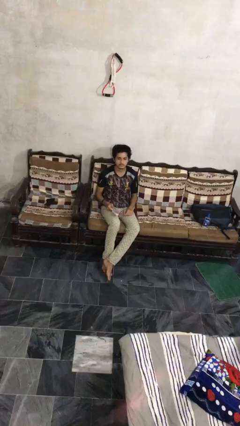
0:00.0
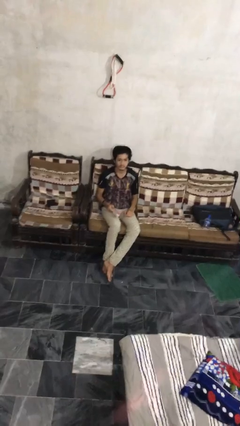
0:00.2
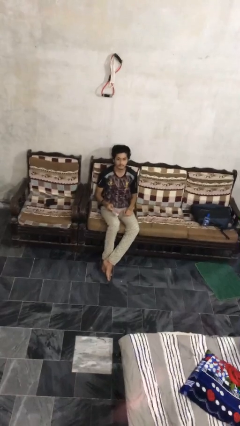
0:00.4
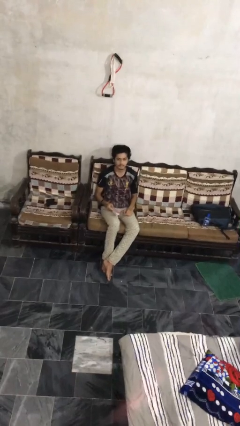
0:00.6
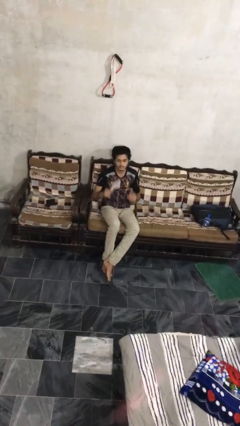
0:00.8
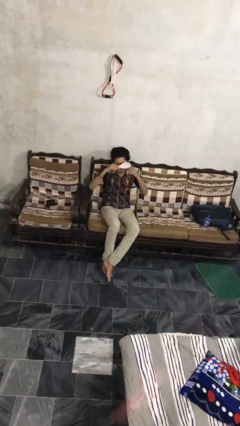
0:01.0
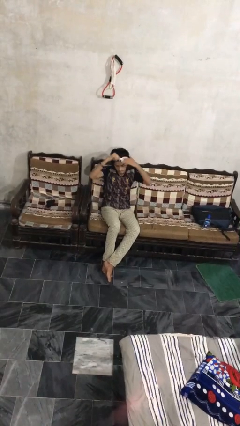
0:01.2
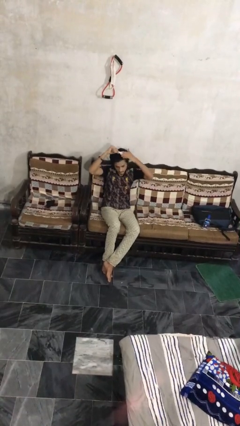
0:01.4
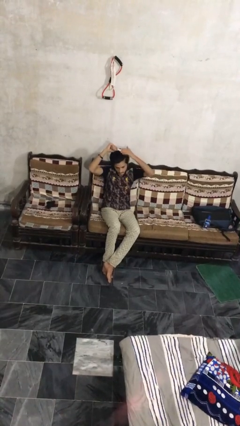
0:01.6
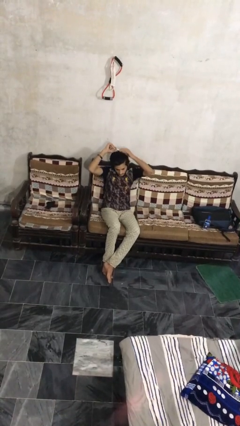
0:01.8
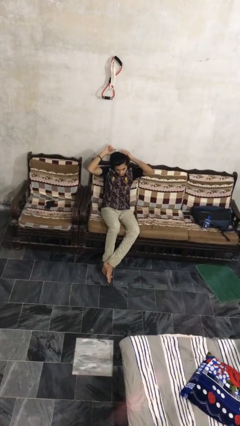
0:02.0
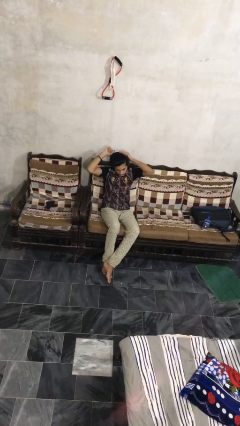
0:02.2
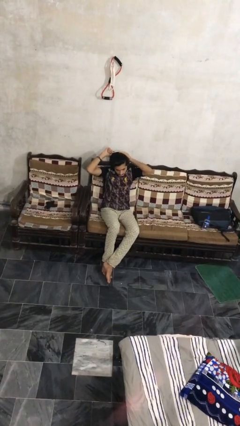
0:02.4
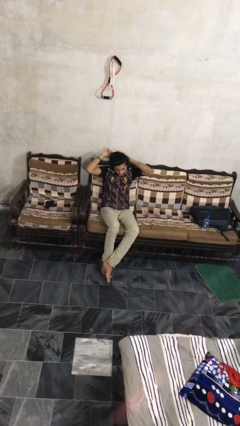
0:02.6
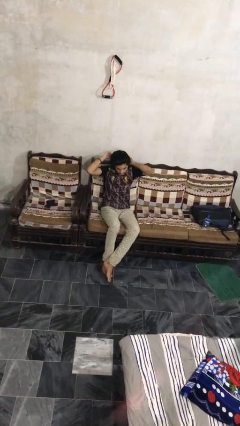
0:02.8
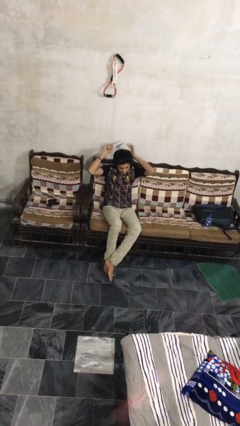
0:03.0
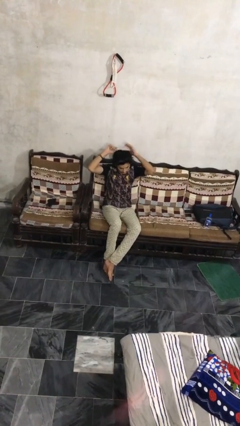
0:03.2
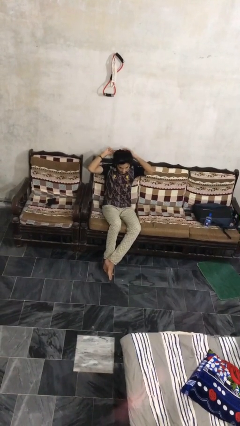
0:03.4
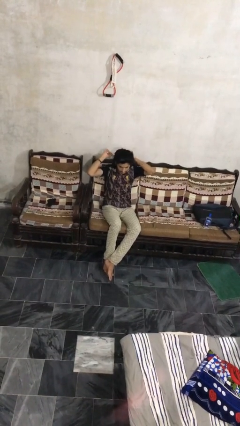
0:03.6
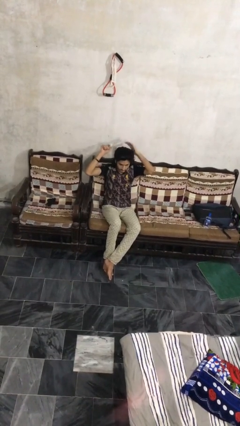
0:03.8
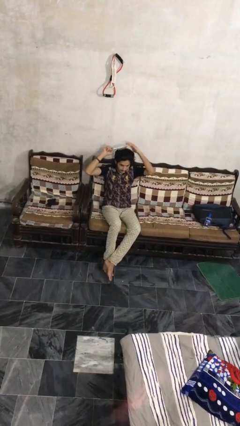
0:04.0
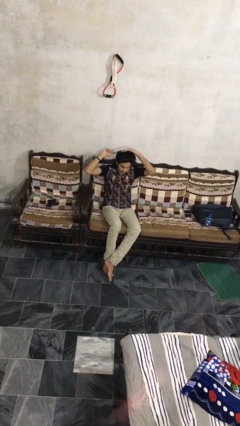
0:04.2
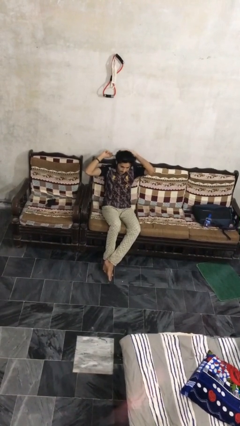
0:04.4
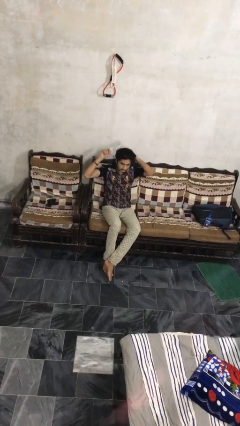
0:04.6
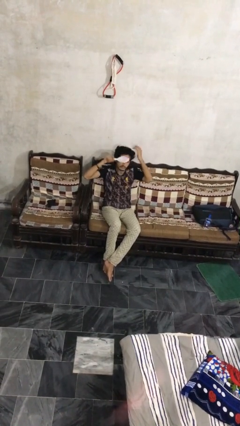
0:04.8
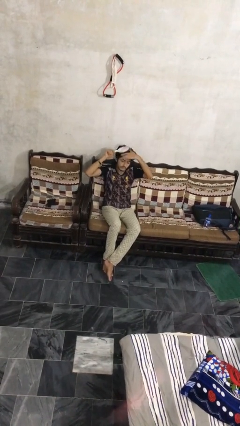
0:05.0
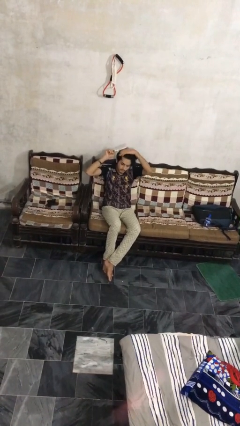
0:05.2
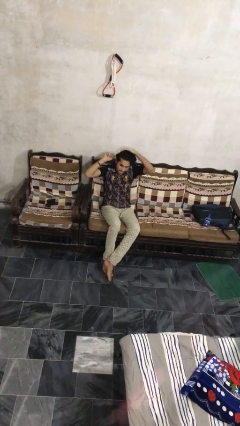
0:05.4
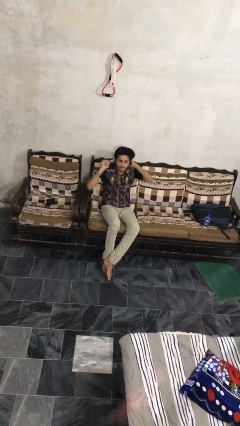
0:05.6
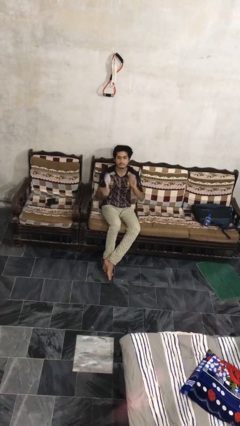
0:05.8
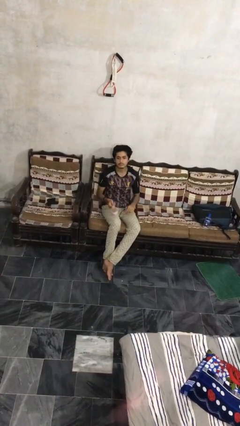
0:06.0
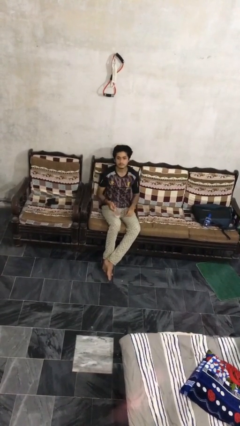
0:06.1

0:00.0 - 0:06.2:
person brushes hair

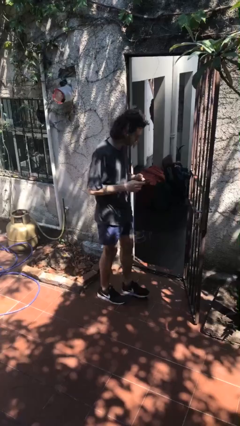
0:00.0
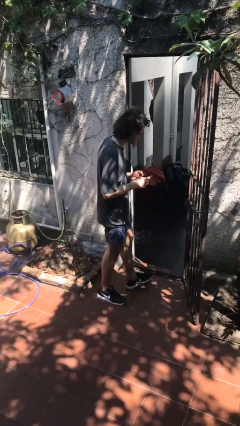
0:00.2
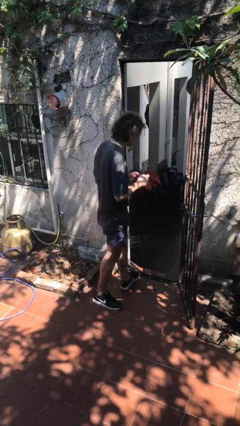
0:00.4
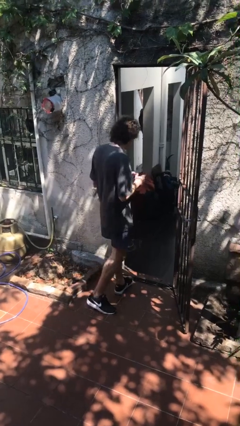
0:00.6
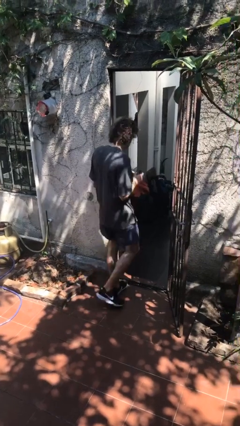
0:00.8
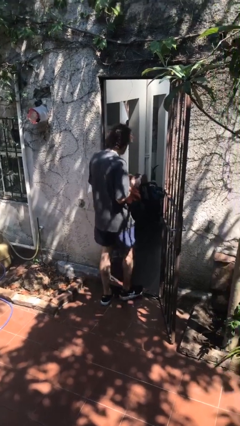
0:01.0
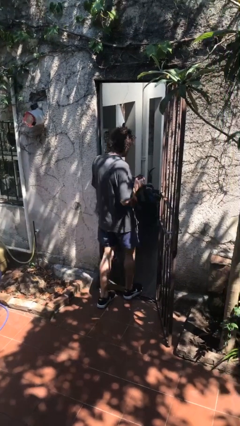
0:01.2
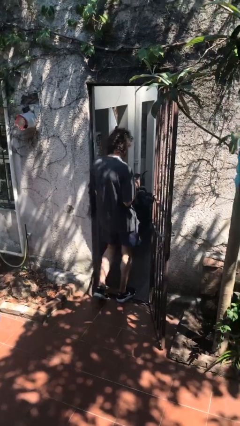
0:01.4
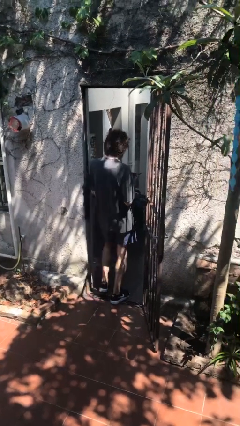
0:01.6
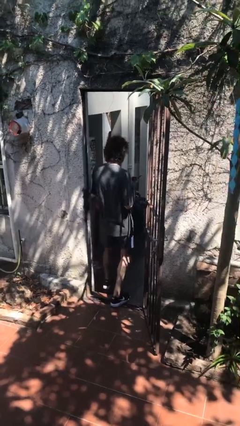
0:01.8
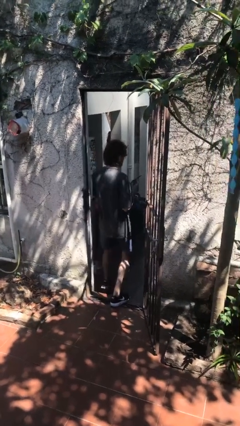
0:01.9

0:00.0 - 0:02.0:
person exits scene through structure

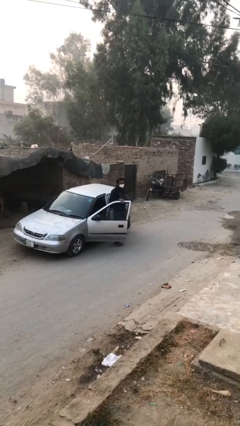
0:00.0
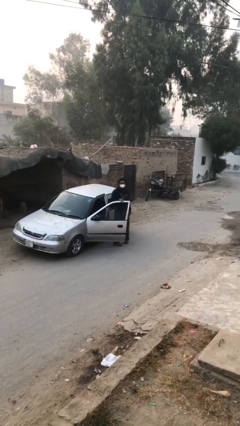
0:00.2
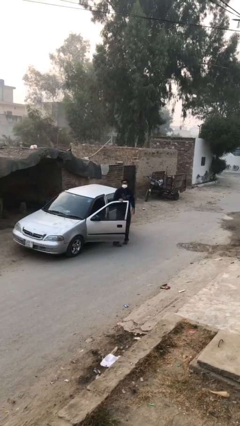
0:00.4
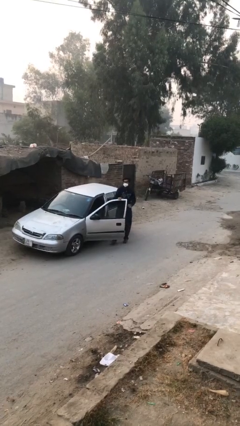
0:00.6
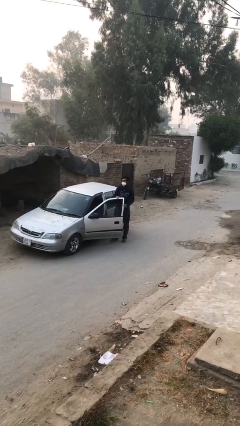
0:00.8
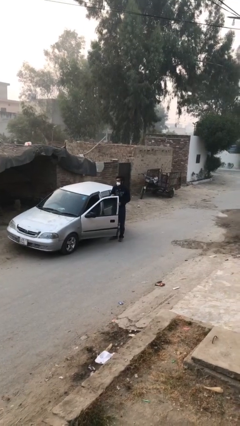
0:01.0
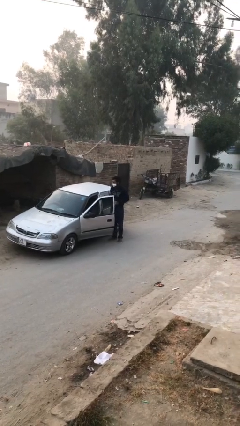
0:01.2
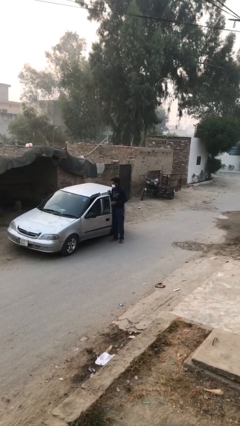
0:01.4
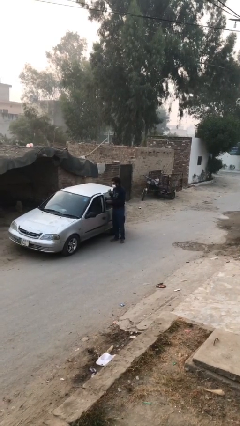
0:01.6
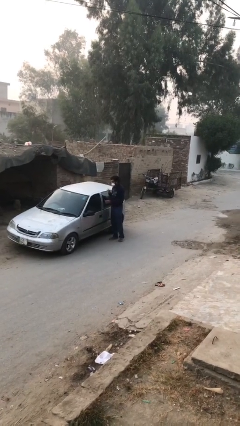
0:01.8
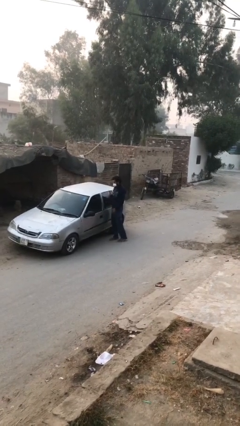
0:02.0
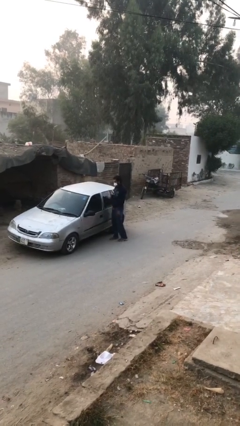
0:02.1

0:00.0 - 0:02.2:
person closes car door

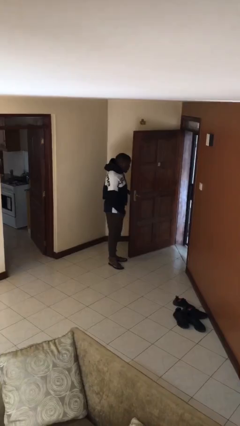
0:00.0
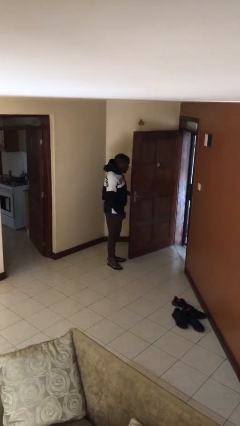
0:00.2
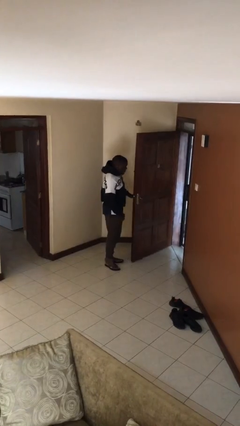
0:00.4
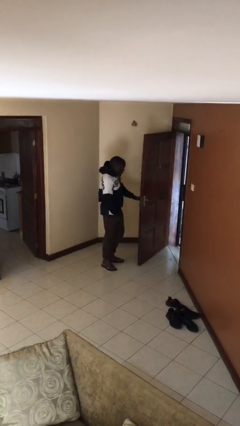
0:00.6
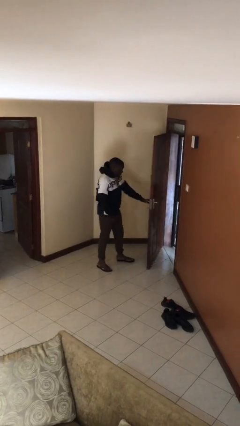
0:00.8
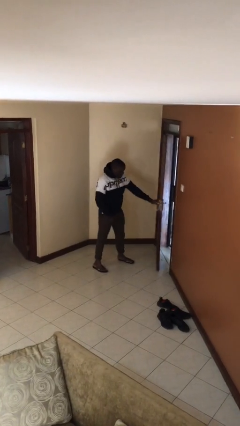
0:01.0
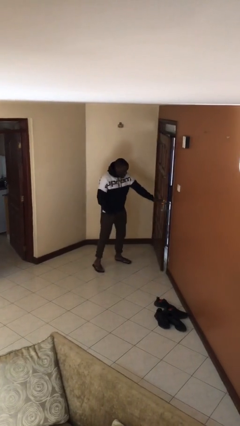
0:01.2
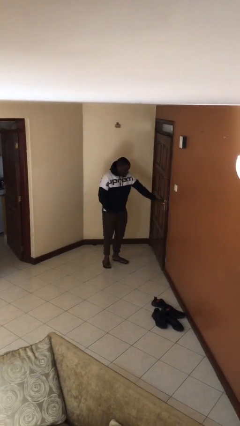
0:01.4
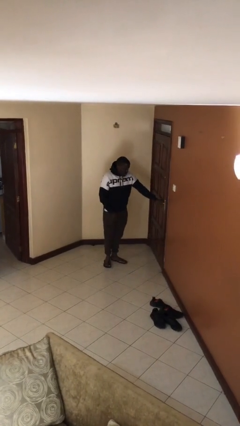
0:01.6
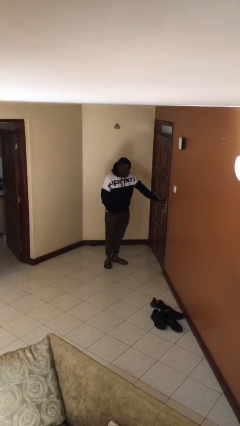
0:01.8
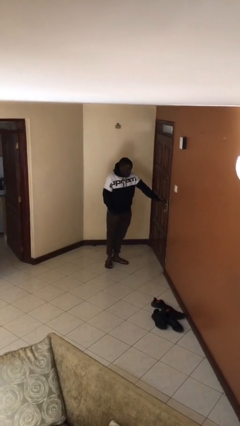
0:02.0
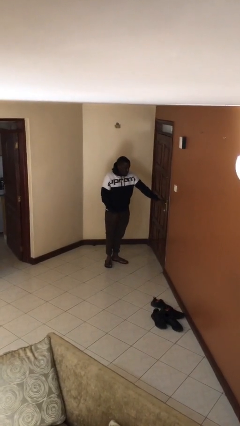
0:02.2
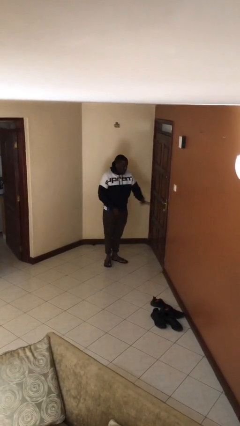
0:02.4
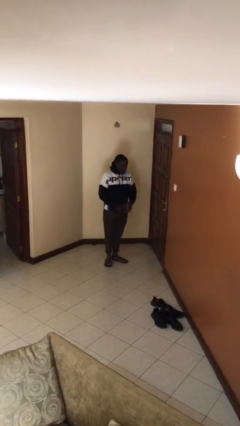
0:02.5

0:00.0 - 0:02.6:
person closes facility door

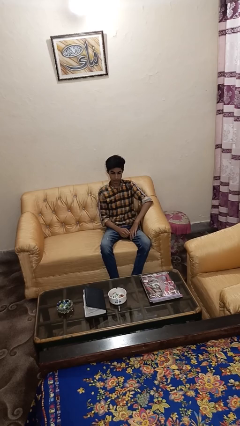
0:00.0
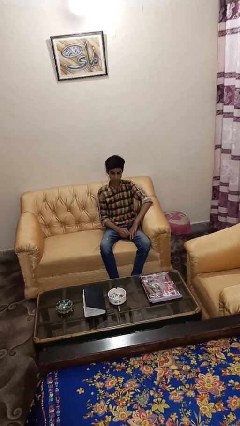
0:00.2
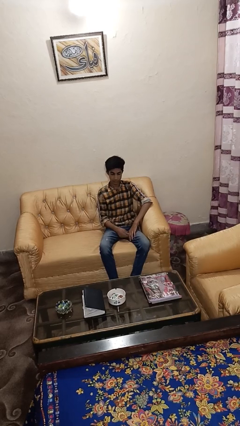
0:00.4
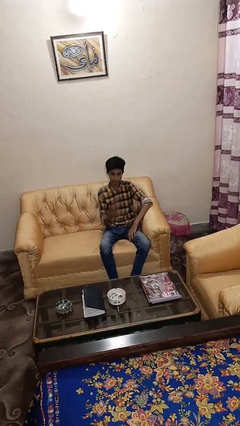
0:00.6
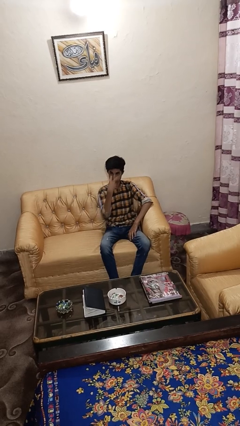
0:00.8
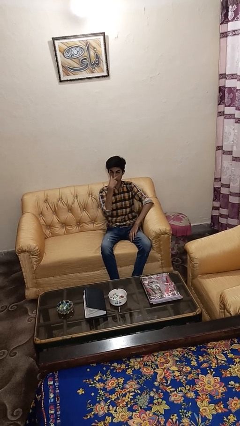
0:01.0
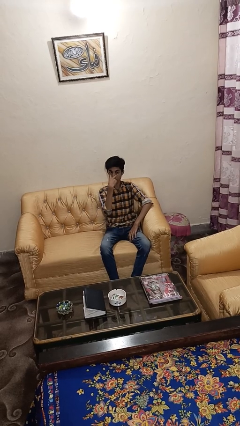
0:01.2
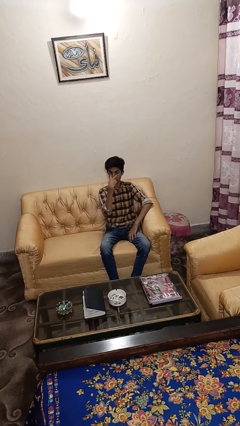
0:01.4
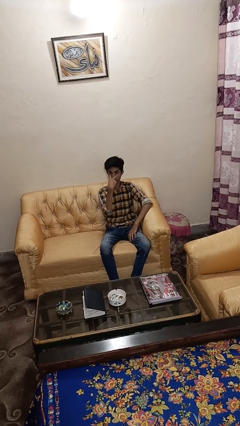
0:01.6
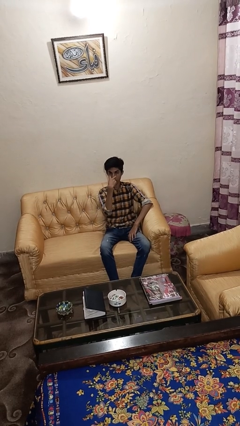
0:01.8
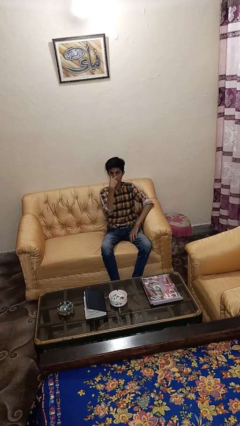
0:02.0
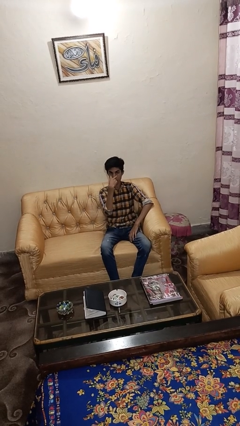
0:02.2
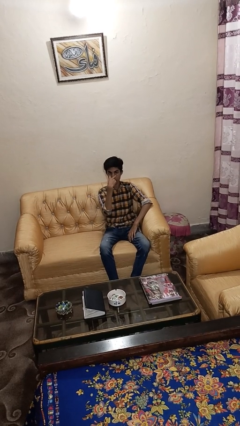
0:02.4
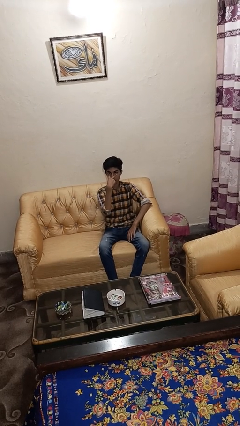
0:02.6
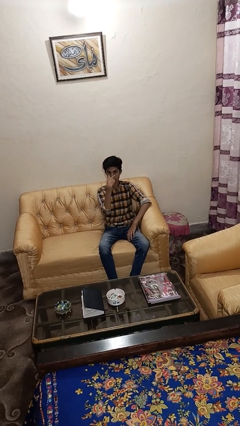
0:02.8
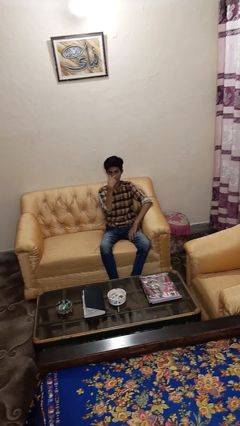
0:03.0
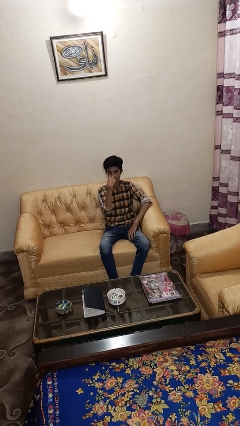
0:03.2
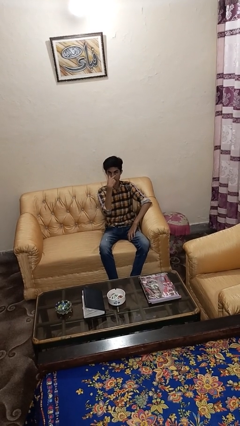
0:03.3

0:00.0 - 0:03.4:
person gestures watch closely

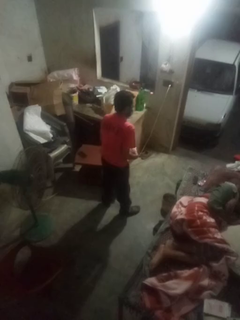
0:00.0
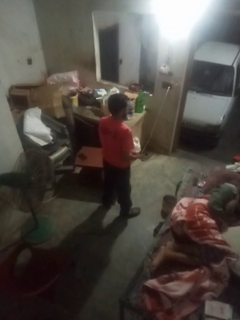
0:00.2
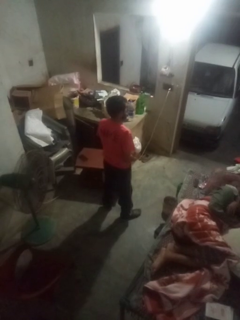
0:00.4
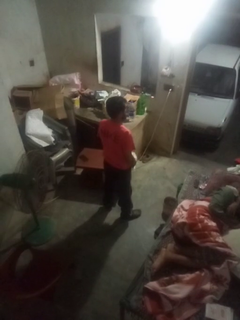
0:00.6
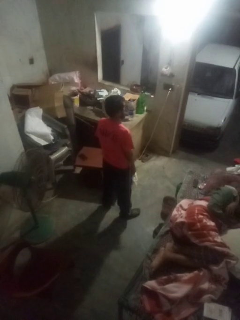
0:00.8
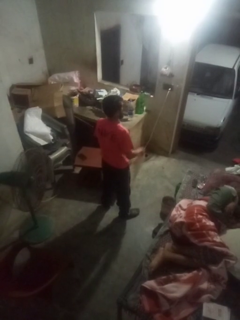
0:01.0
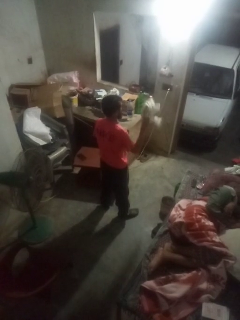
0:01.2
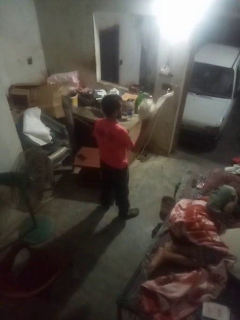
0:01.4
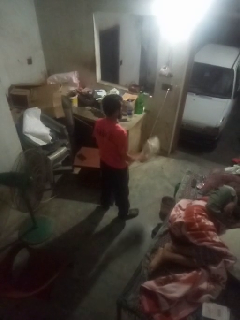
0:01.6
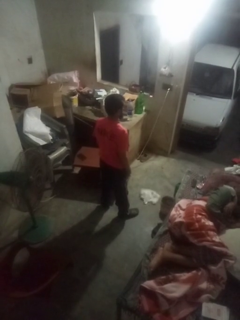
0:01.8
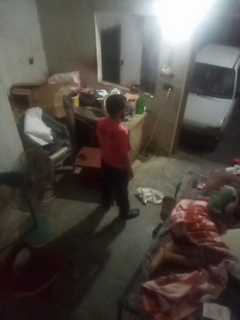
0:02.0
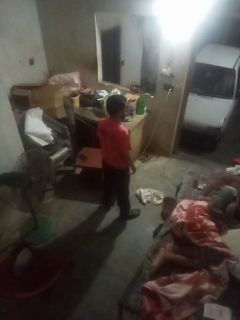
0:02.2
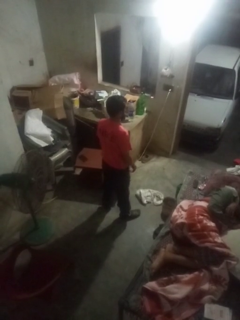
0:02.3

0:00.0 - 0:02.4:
person throws object to ground
